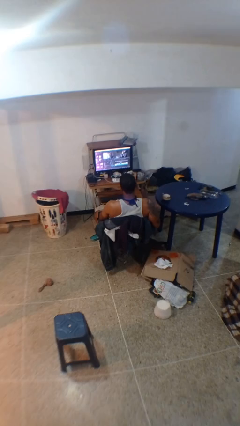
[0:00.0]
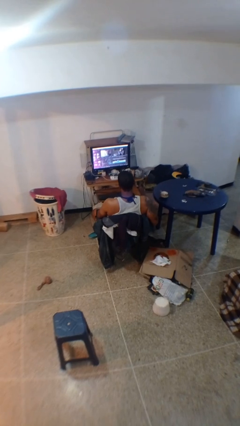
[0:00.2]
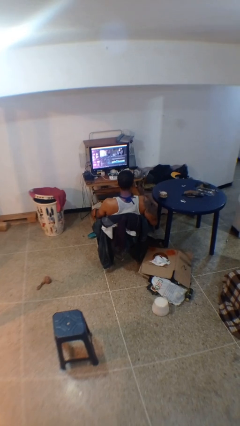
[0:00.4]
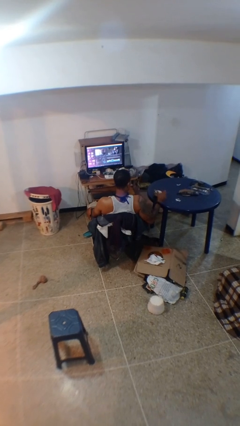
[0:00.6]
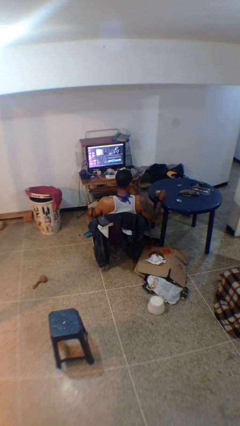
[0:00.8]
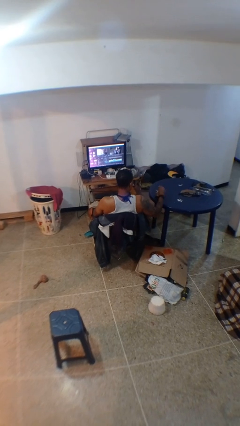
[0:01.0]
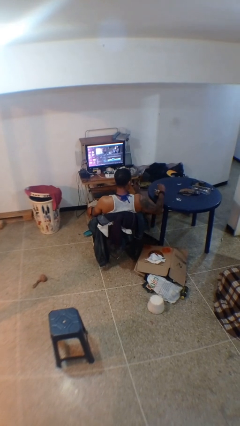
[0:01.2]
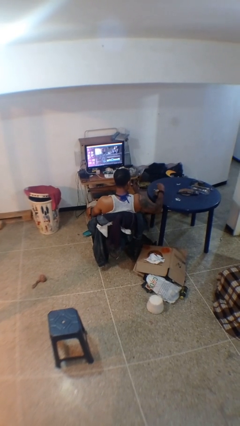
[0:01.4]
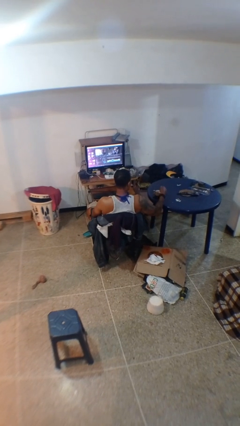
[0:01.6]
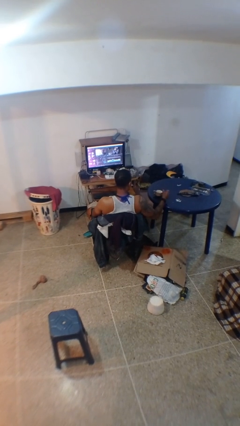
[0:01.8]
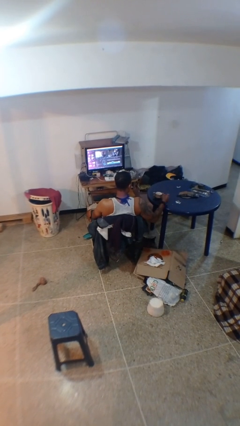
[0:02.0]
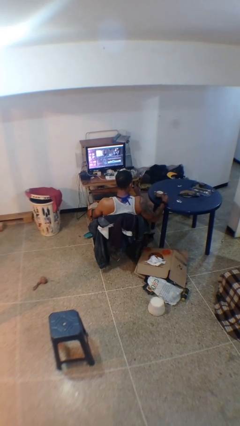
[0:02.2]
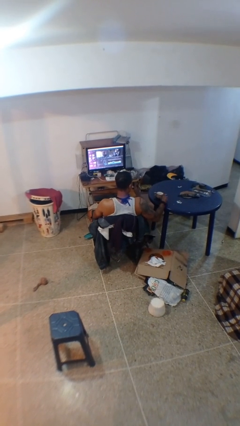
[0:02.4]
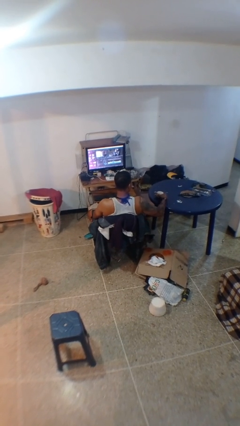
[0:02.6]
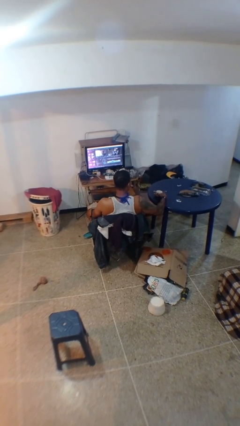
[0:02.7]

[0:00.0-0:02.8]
person stirs mug

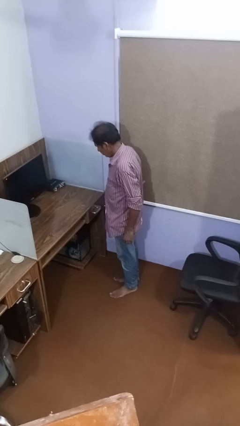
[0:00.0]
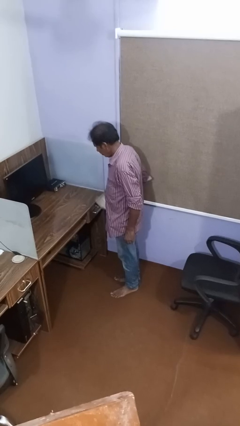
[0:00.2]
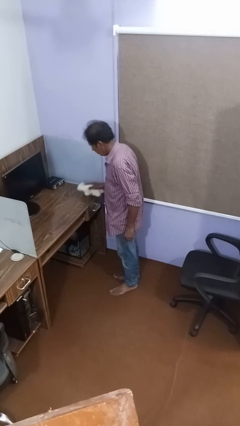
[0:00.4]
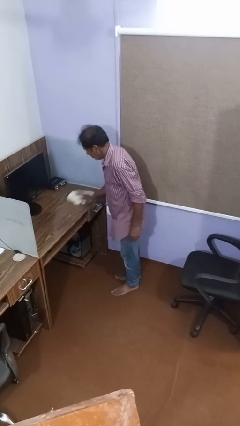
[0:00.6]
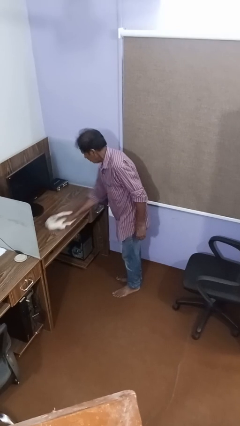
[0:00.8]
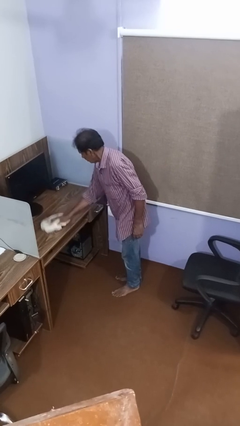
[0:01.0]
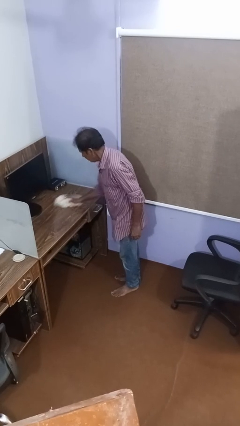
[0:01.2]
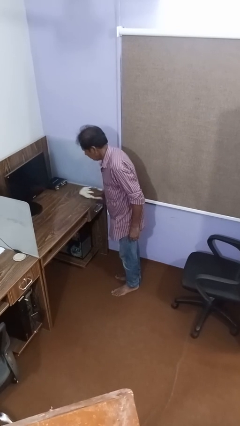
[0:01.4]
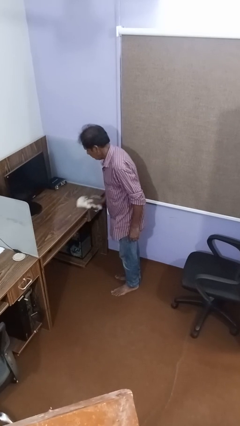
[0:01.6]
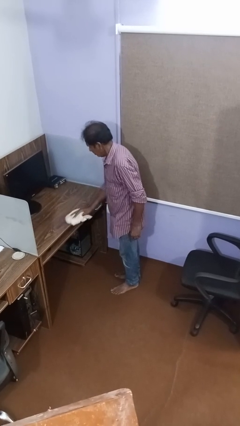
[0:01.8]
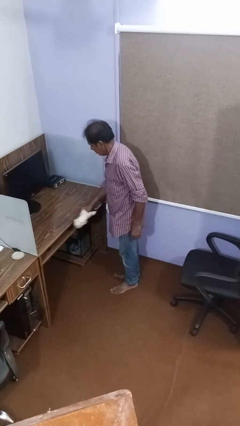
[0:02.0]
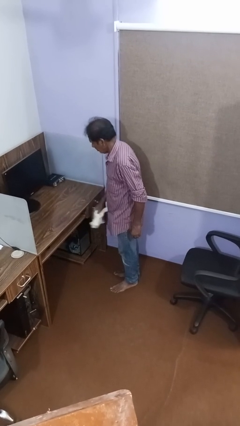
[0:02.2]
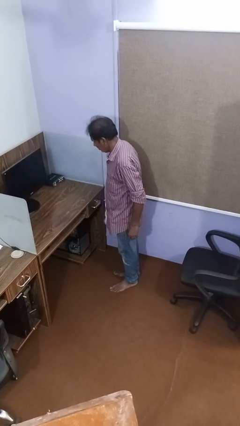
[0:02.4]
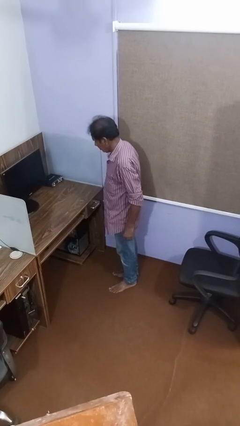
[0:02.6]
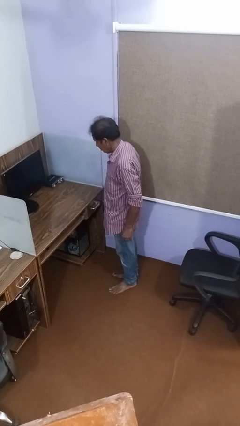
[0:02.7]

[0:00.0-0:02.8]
person cleans table with rag

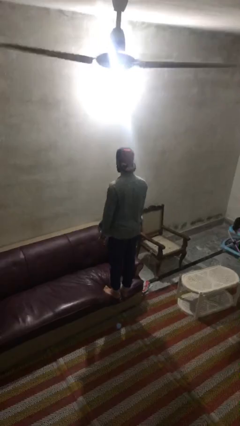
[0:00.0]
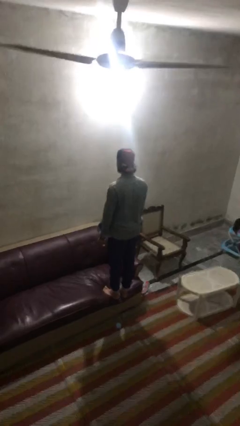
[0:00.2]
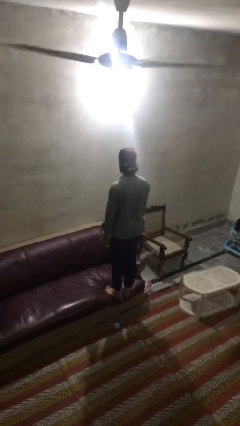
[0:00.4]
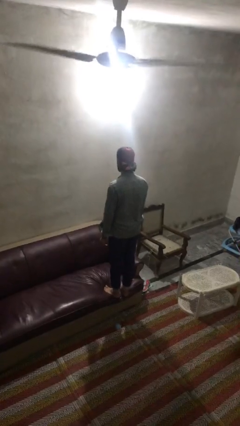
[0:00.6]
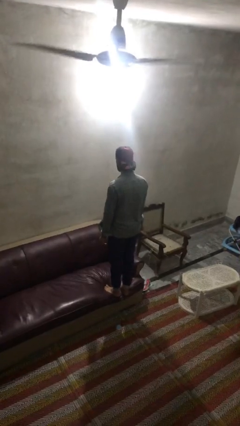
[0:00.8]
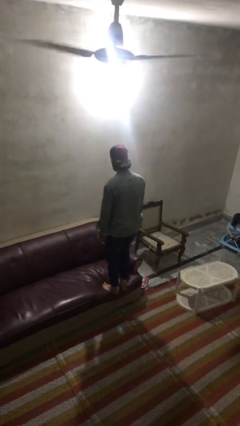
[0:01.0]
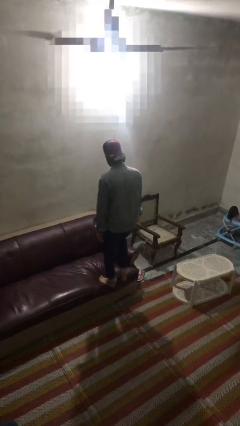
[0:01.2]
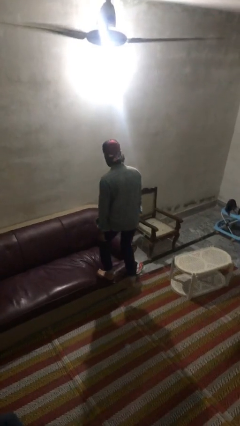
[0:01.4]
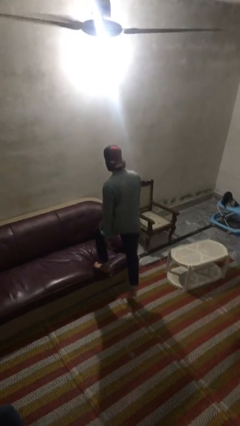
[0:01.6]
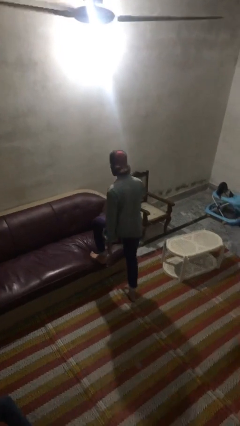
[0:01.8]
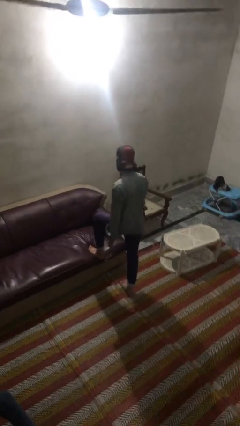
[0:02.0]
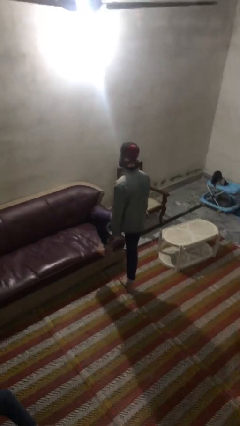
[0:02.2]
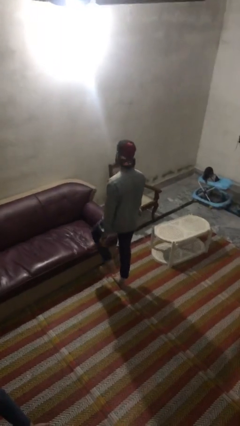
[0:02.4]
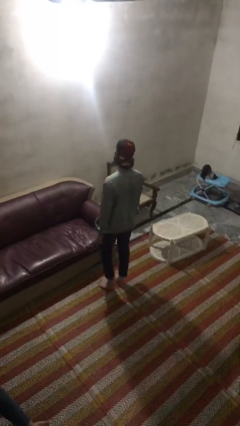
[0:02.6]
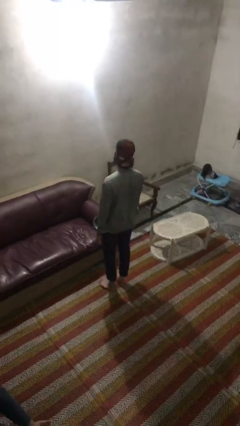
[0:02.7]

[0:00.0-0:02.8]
person climbs off couch

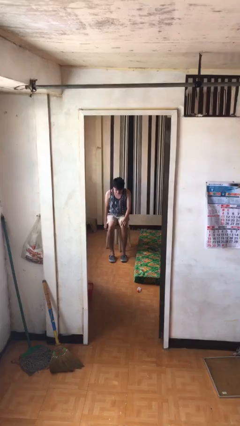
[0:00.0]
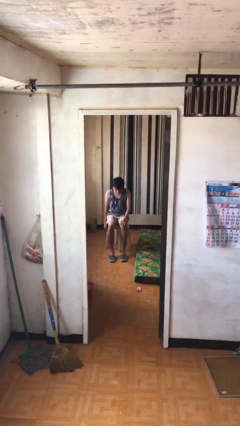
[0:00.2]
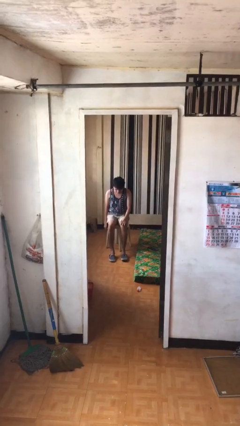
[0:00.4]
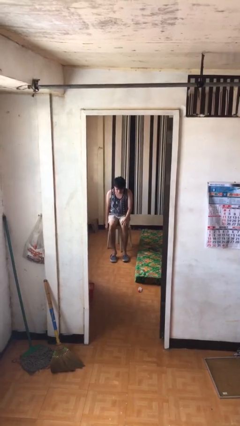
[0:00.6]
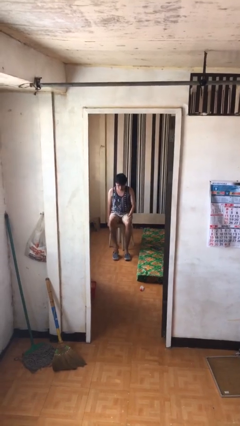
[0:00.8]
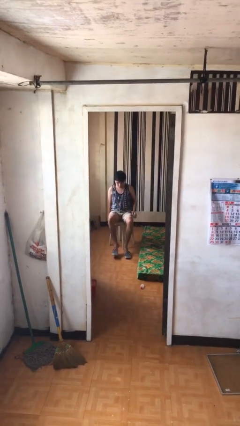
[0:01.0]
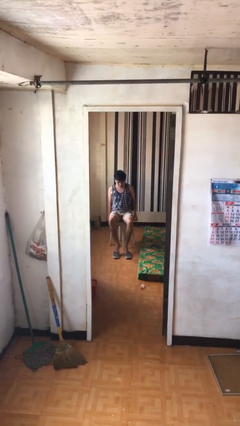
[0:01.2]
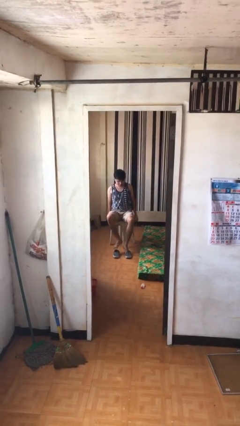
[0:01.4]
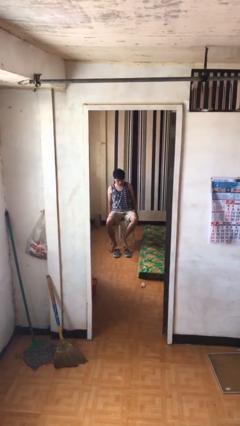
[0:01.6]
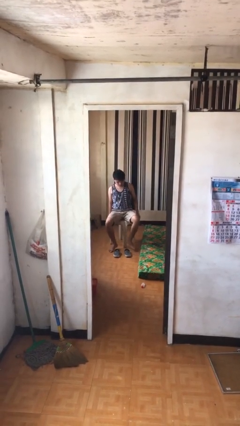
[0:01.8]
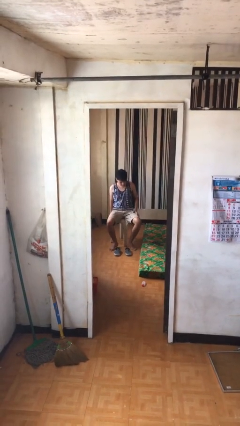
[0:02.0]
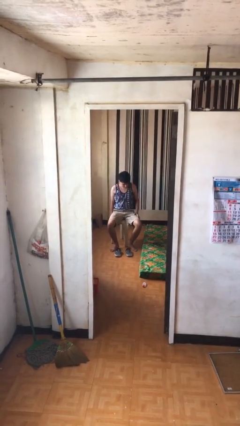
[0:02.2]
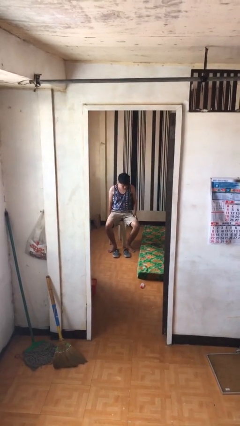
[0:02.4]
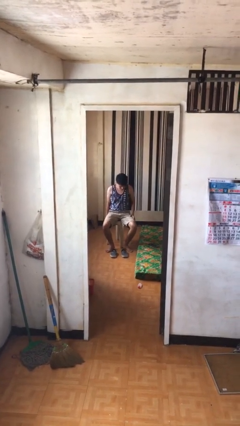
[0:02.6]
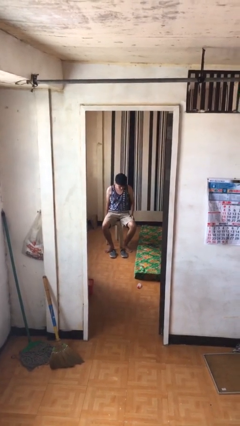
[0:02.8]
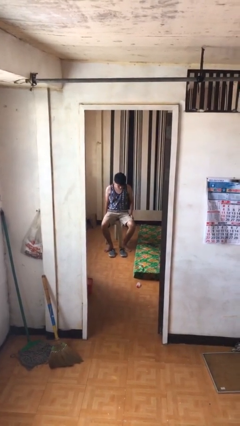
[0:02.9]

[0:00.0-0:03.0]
person takes off shoes

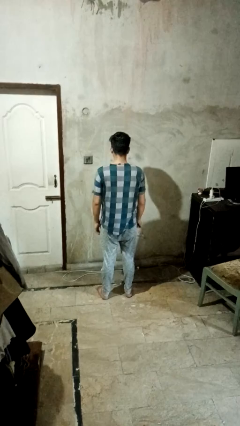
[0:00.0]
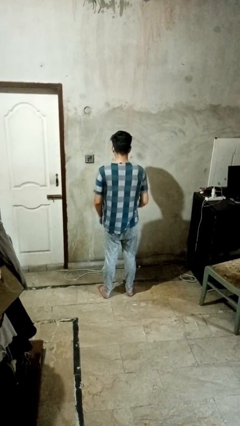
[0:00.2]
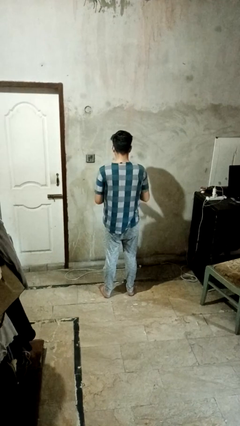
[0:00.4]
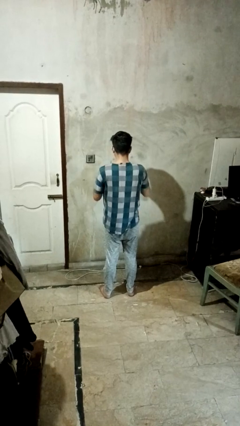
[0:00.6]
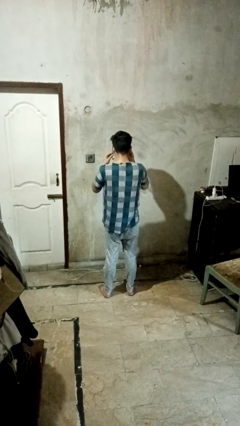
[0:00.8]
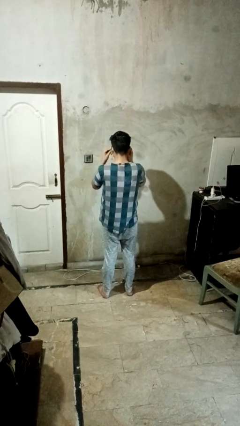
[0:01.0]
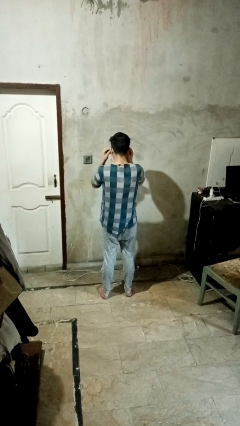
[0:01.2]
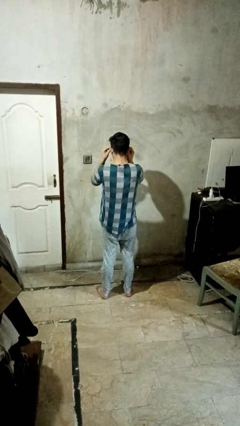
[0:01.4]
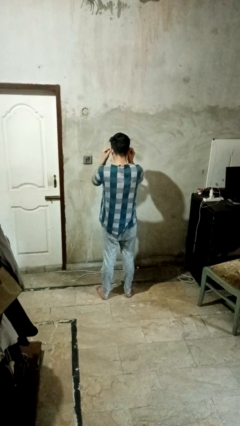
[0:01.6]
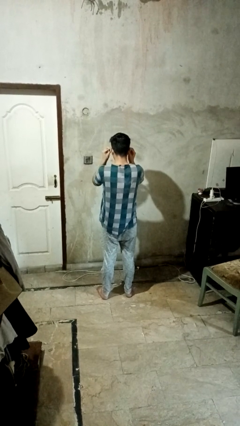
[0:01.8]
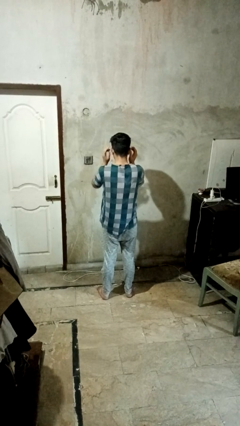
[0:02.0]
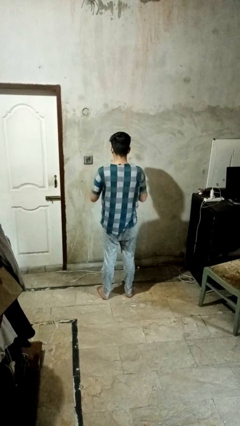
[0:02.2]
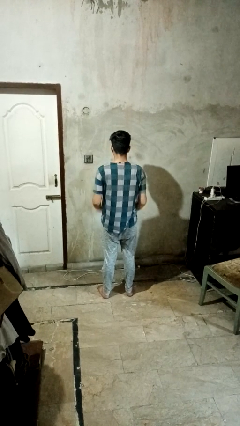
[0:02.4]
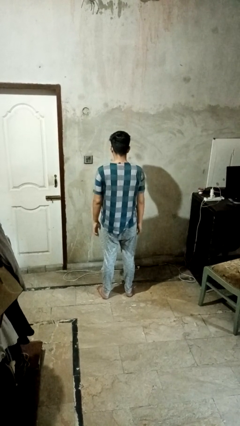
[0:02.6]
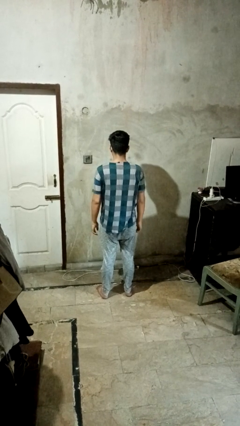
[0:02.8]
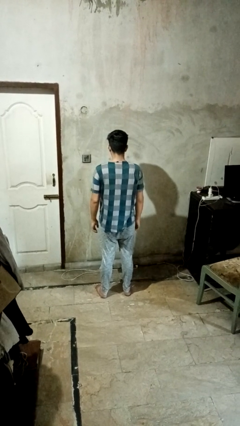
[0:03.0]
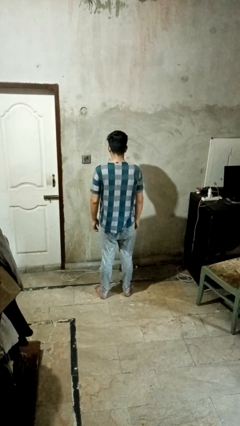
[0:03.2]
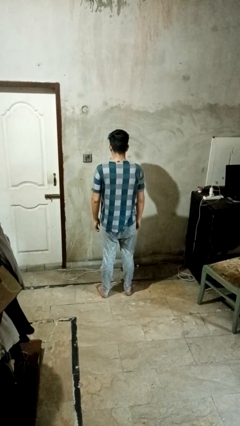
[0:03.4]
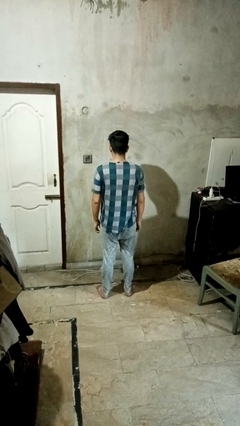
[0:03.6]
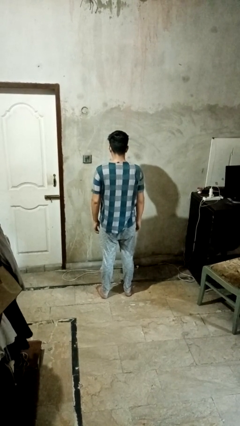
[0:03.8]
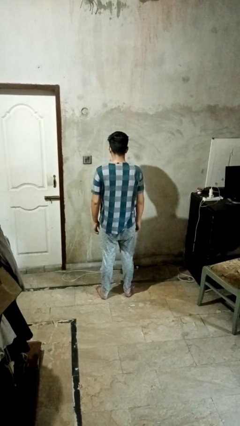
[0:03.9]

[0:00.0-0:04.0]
person puts on glasses

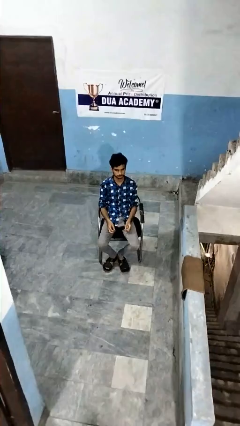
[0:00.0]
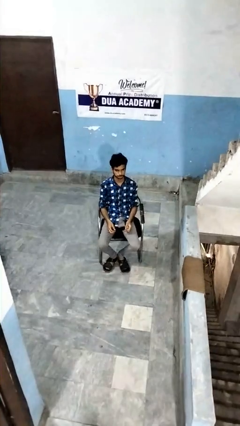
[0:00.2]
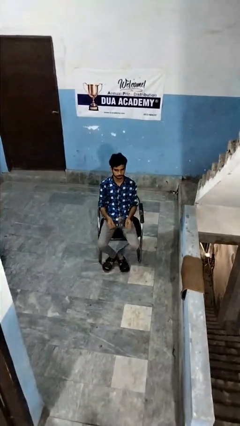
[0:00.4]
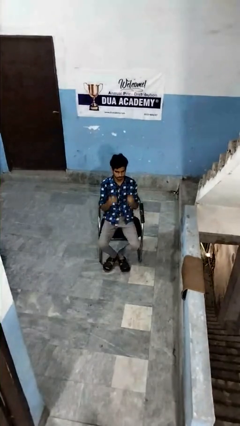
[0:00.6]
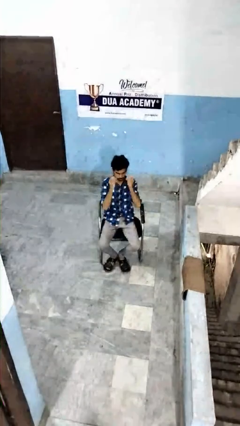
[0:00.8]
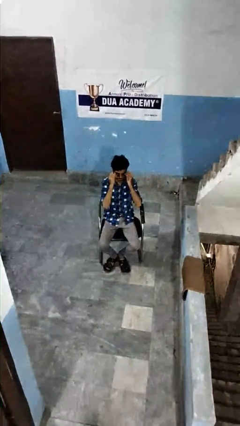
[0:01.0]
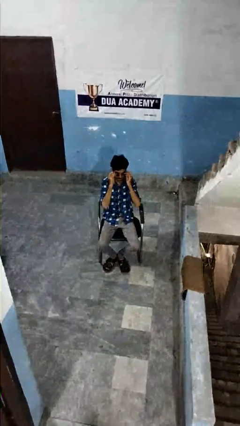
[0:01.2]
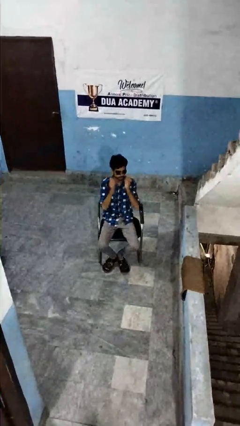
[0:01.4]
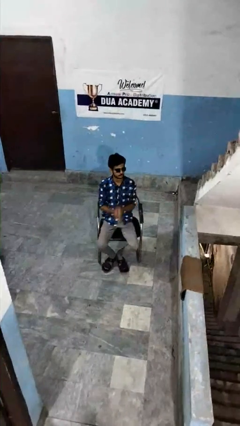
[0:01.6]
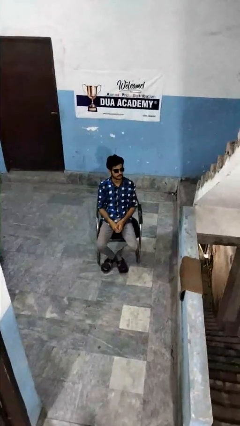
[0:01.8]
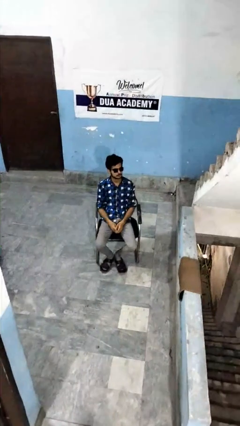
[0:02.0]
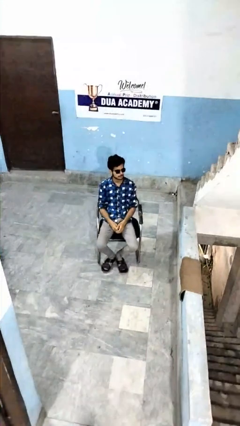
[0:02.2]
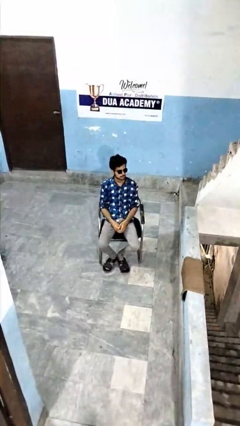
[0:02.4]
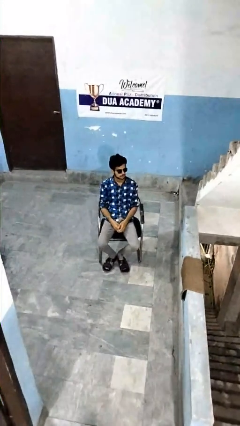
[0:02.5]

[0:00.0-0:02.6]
person puts on sunglasses
